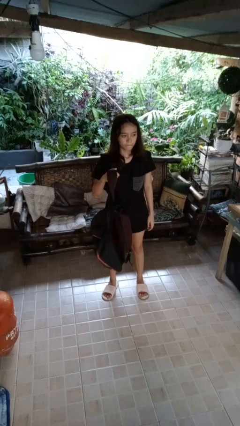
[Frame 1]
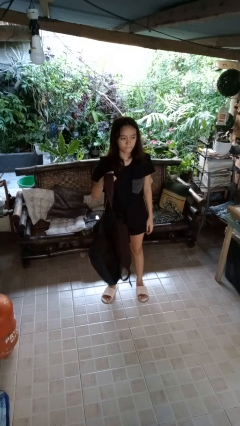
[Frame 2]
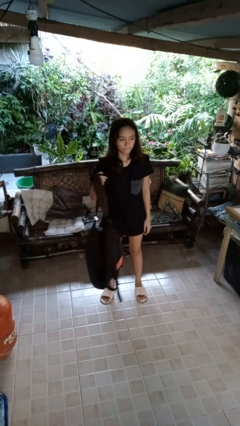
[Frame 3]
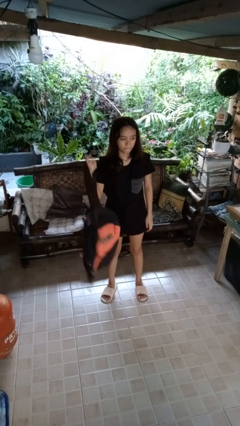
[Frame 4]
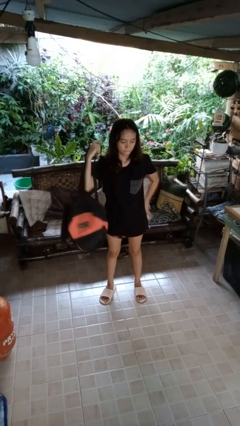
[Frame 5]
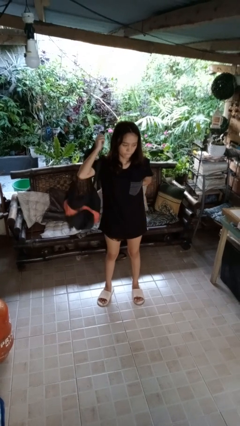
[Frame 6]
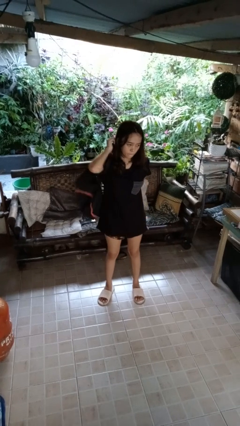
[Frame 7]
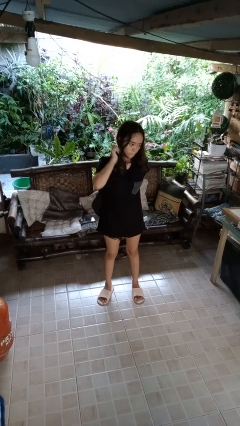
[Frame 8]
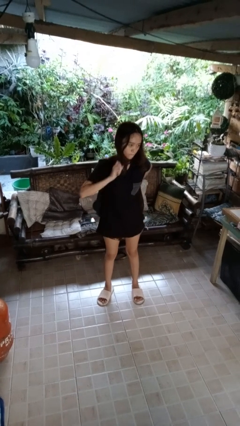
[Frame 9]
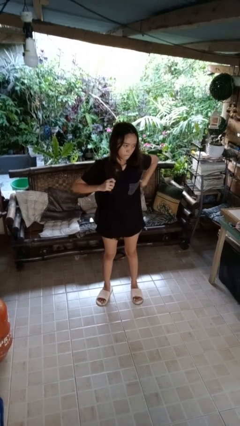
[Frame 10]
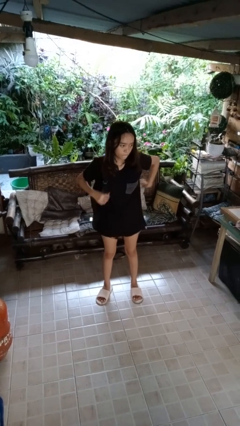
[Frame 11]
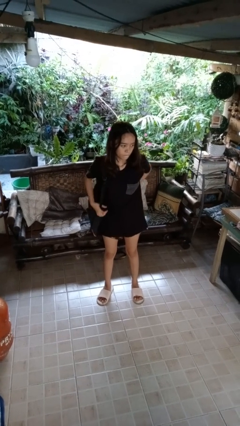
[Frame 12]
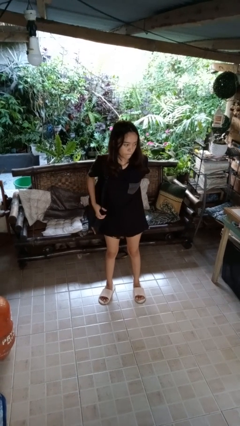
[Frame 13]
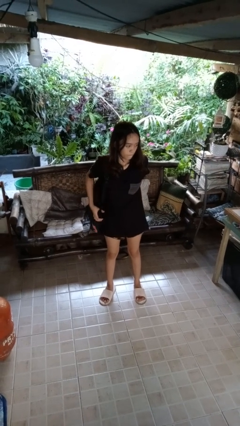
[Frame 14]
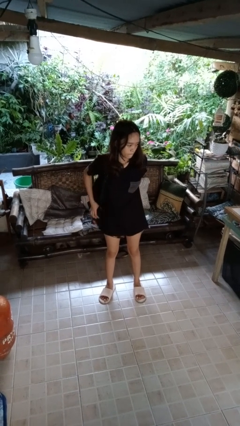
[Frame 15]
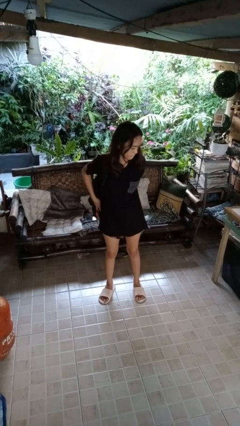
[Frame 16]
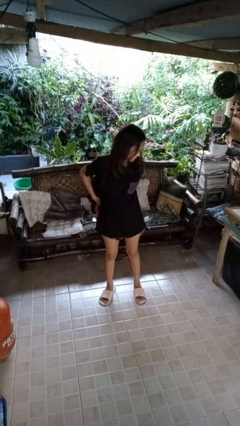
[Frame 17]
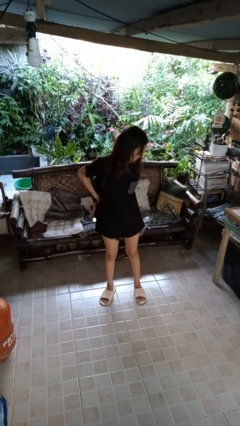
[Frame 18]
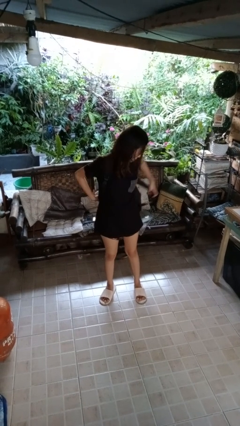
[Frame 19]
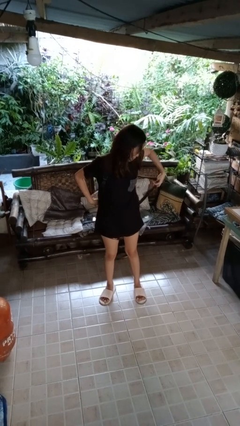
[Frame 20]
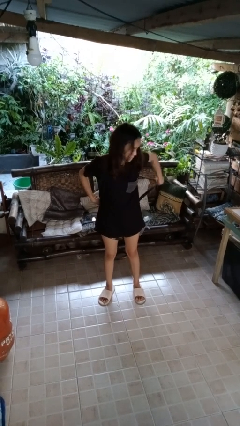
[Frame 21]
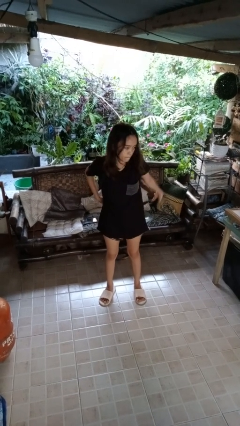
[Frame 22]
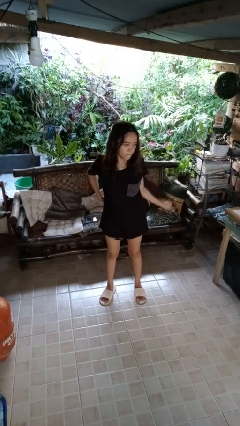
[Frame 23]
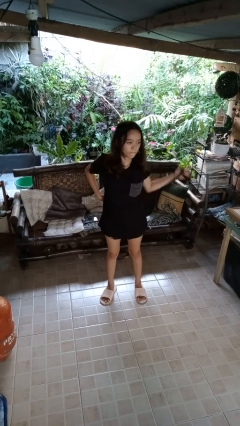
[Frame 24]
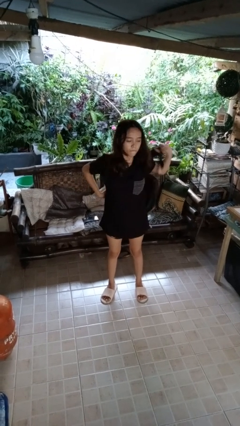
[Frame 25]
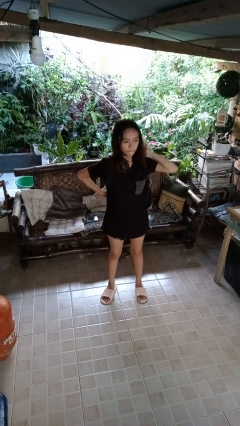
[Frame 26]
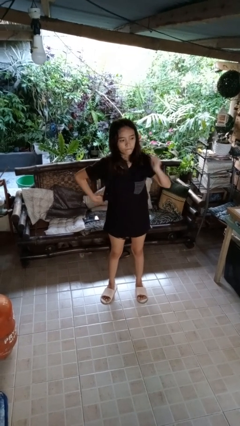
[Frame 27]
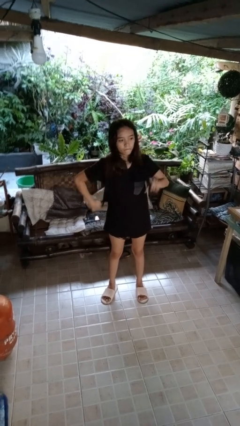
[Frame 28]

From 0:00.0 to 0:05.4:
person puts on backpack

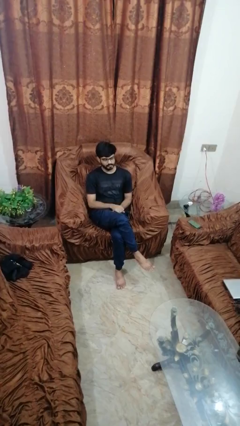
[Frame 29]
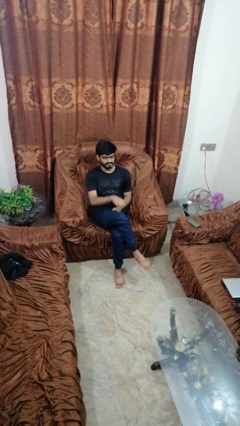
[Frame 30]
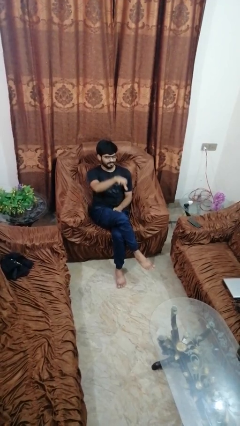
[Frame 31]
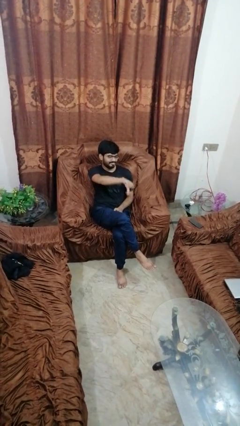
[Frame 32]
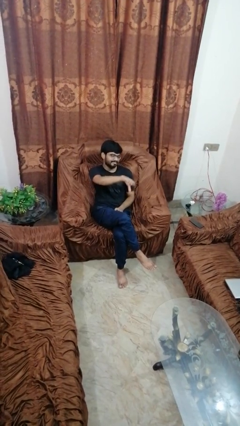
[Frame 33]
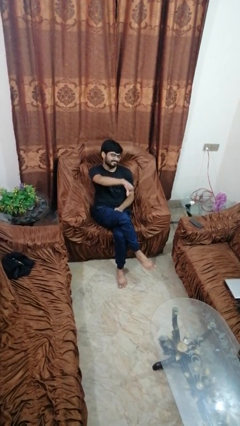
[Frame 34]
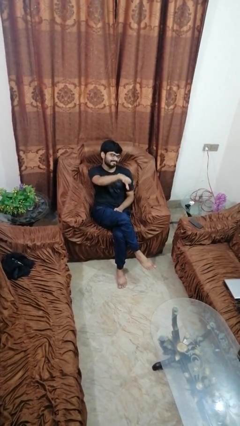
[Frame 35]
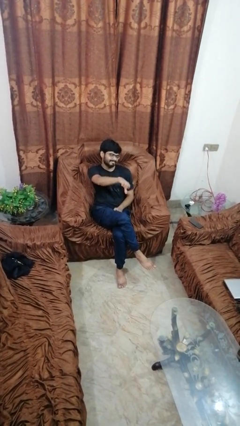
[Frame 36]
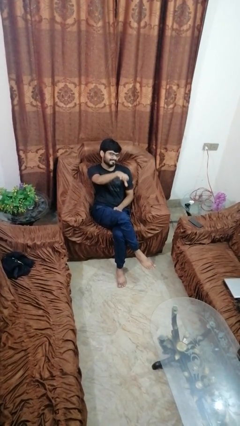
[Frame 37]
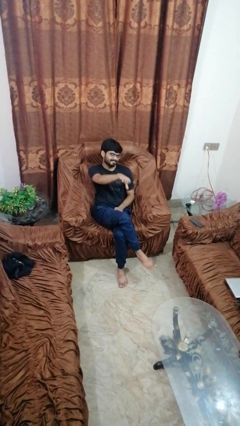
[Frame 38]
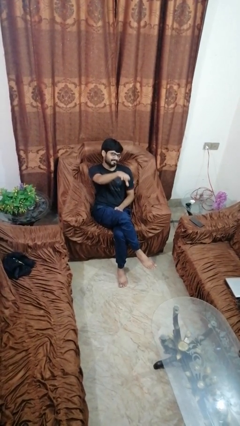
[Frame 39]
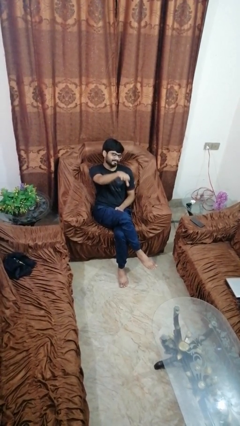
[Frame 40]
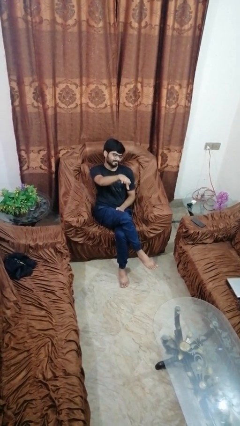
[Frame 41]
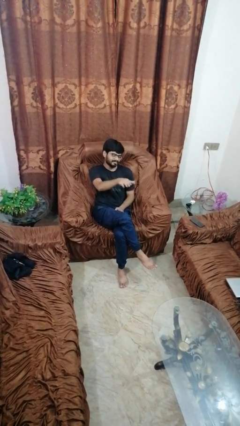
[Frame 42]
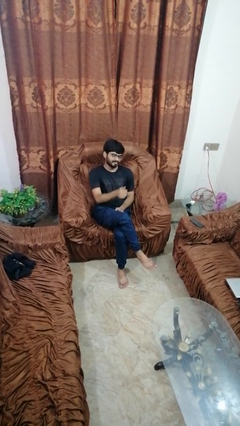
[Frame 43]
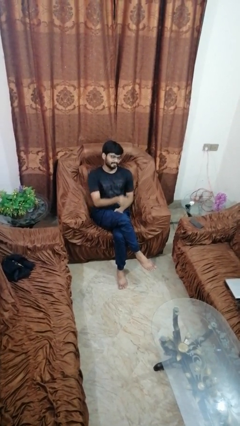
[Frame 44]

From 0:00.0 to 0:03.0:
person gestures thumbs down

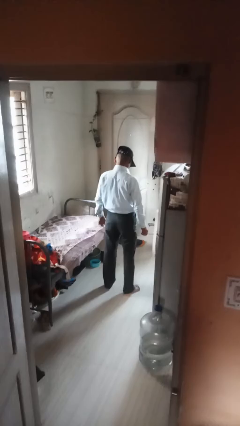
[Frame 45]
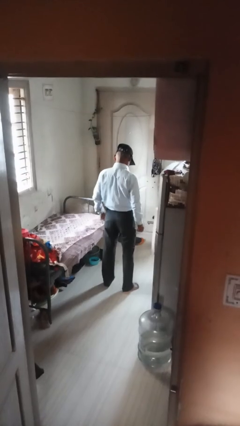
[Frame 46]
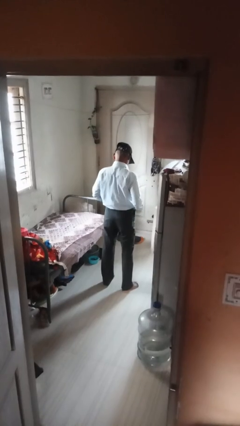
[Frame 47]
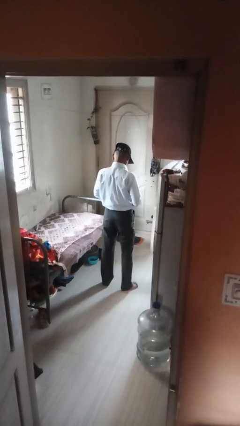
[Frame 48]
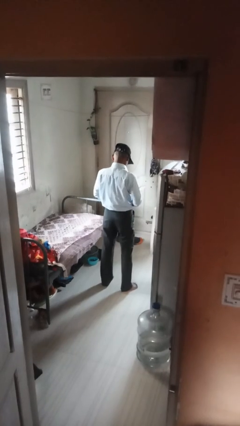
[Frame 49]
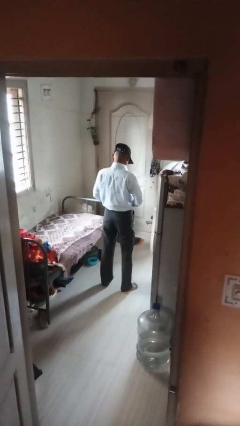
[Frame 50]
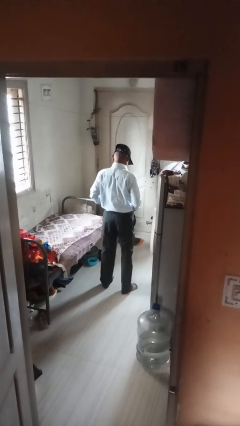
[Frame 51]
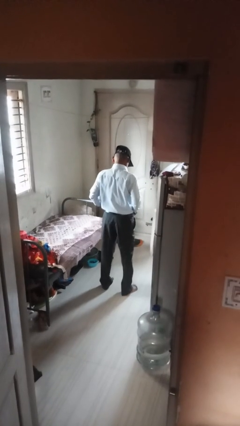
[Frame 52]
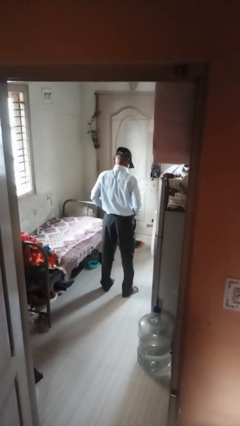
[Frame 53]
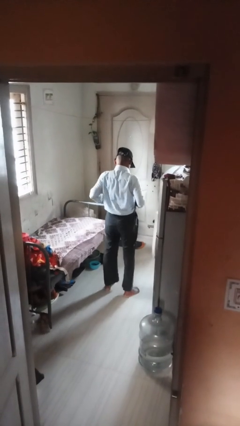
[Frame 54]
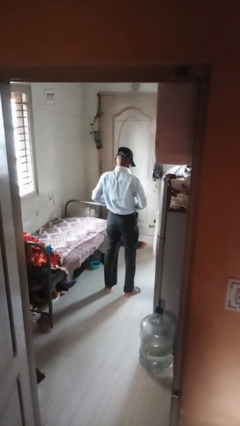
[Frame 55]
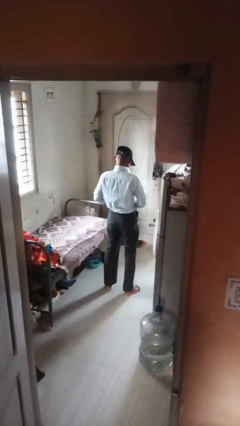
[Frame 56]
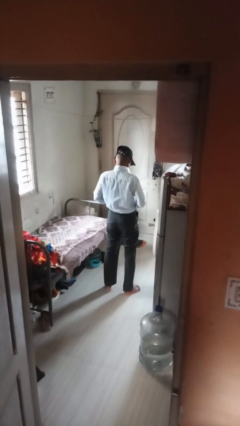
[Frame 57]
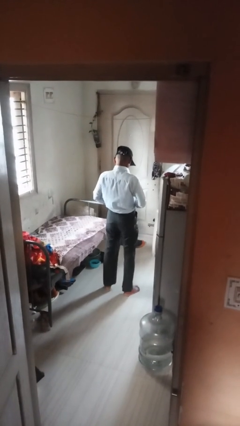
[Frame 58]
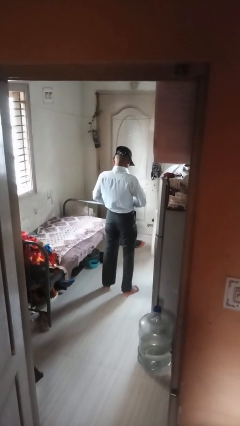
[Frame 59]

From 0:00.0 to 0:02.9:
person hikes up pants

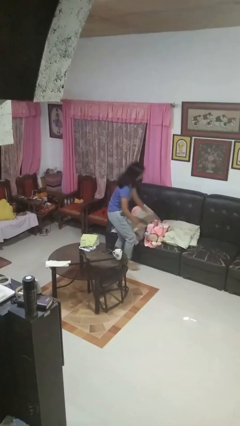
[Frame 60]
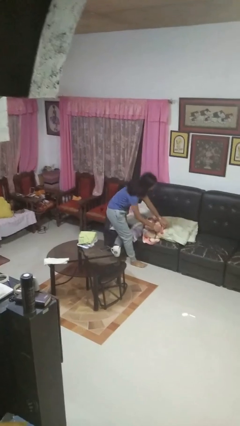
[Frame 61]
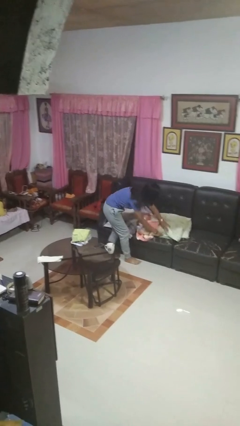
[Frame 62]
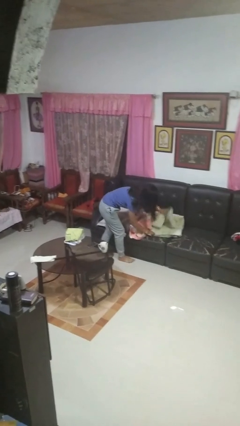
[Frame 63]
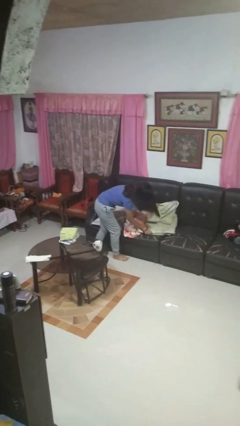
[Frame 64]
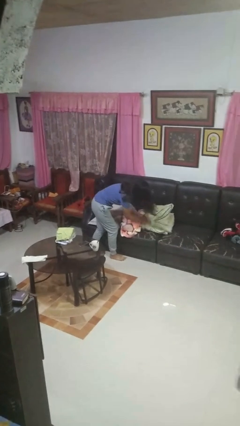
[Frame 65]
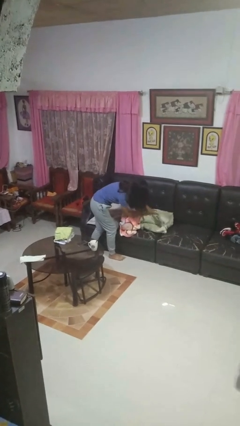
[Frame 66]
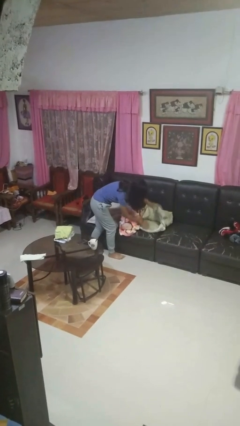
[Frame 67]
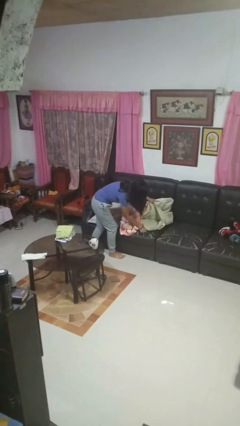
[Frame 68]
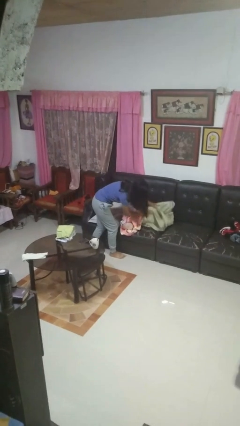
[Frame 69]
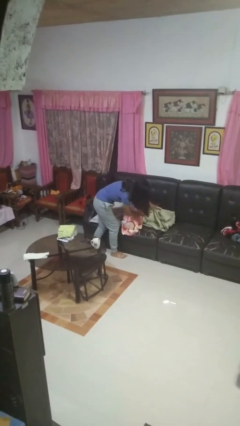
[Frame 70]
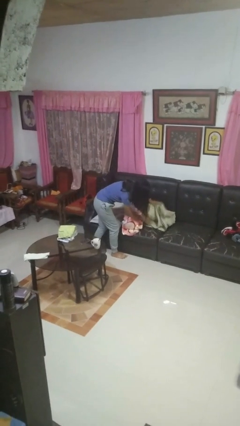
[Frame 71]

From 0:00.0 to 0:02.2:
person searches in couch

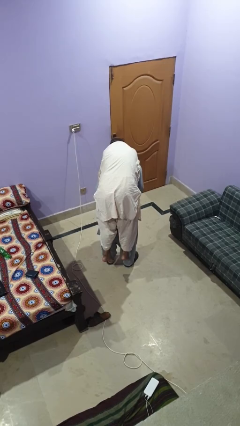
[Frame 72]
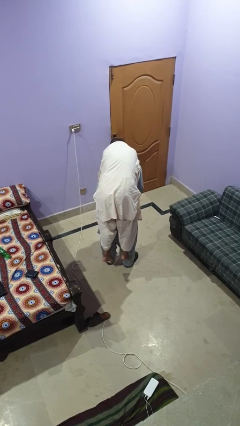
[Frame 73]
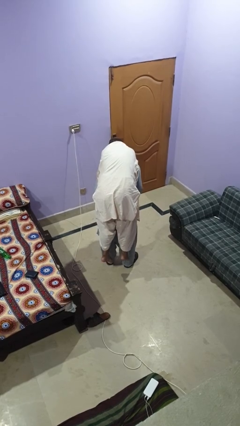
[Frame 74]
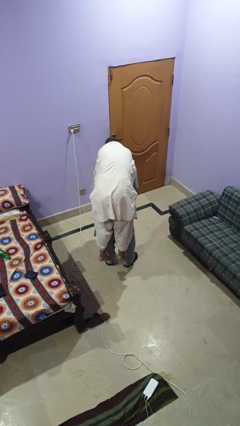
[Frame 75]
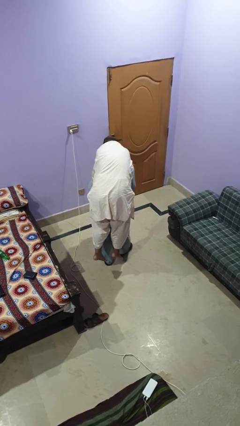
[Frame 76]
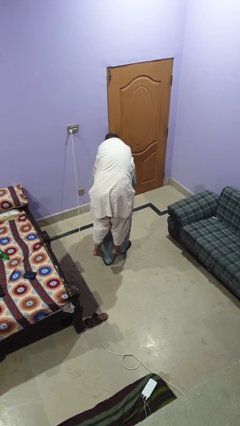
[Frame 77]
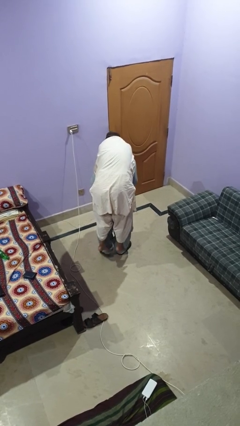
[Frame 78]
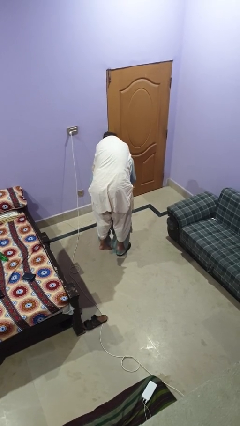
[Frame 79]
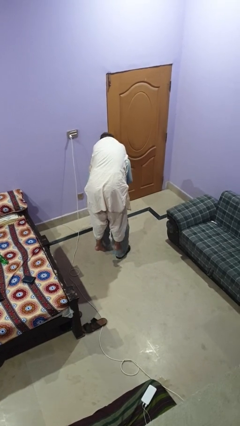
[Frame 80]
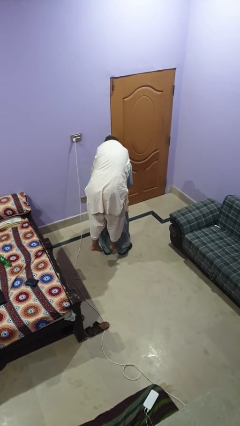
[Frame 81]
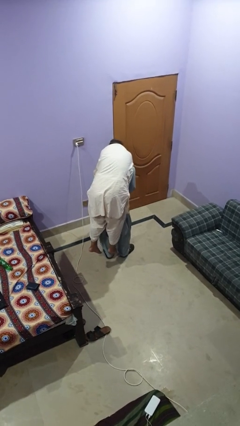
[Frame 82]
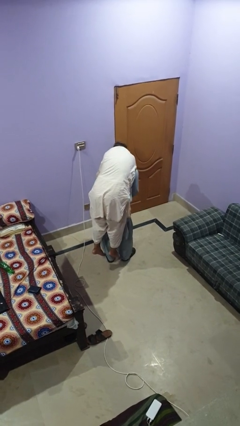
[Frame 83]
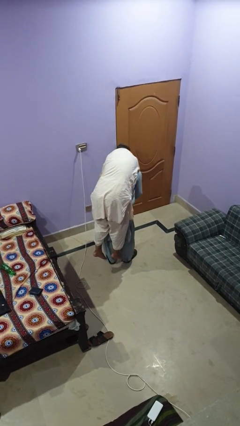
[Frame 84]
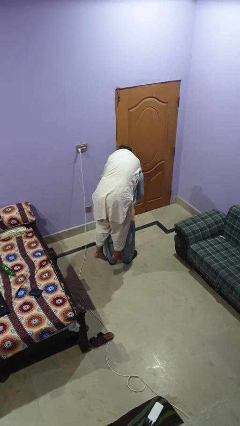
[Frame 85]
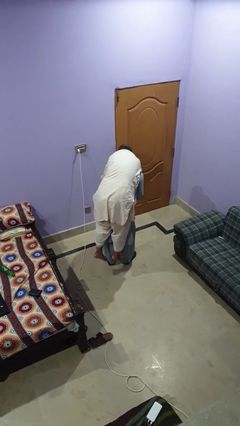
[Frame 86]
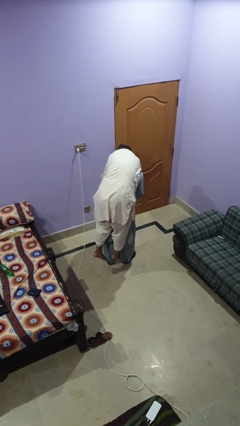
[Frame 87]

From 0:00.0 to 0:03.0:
person carries person on back

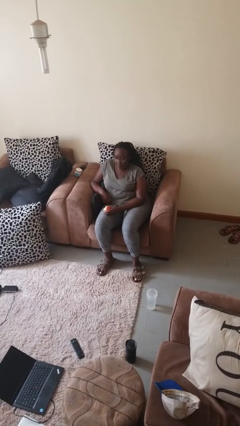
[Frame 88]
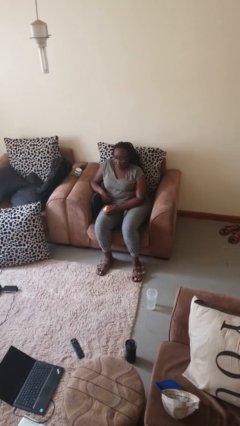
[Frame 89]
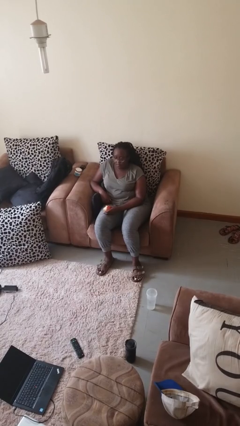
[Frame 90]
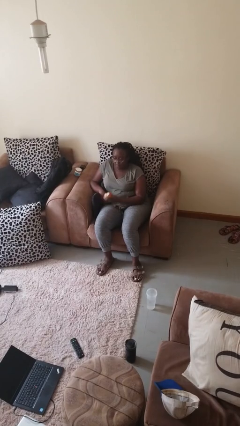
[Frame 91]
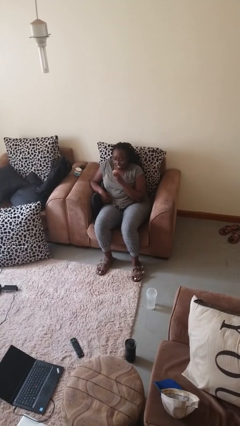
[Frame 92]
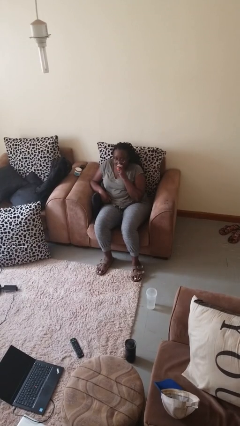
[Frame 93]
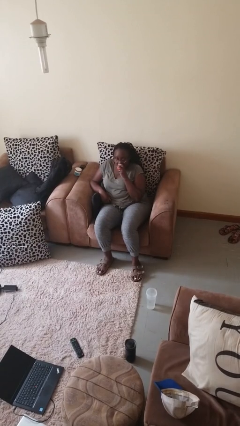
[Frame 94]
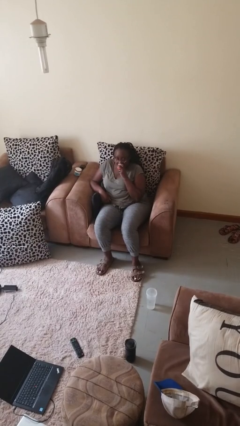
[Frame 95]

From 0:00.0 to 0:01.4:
person eats apple
